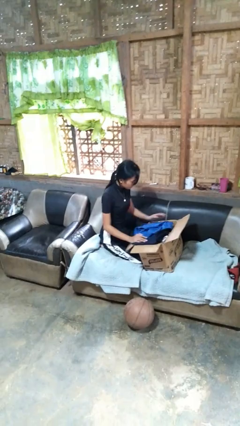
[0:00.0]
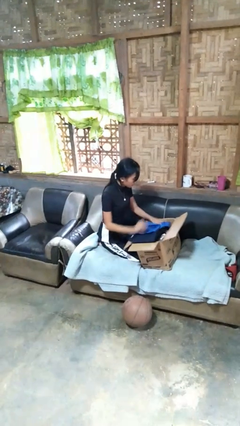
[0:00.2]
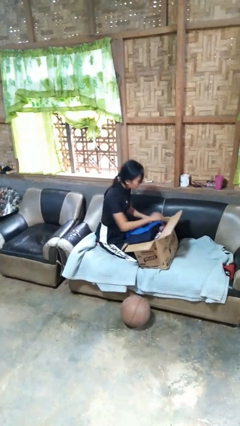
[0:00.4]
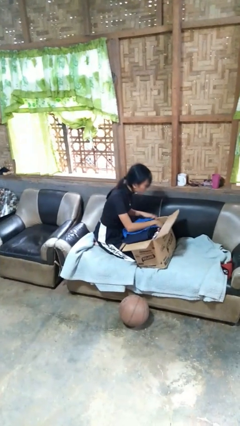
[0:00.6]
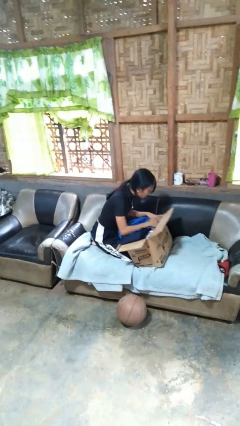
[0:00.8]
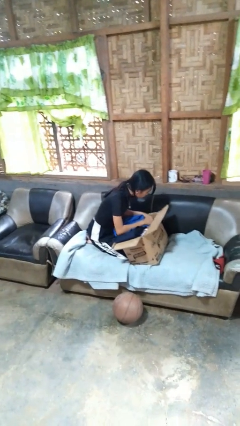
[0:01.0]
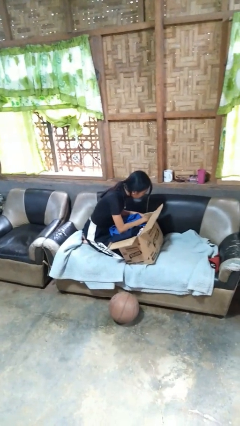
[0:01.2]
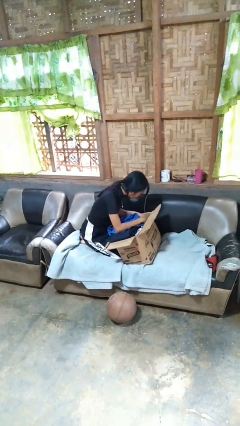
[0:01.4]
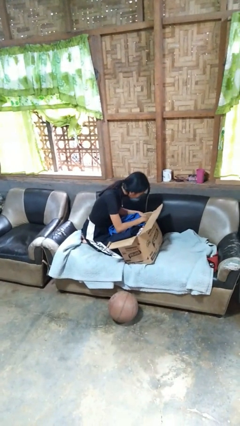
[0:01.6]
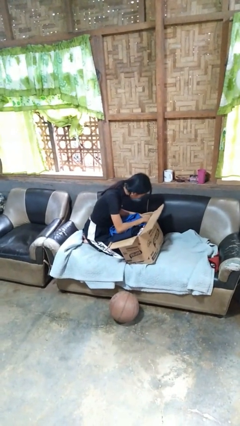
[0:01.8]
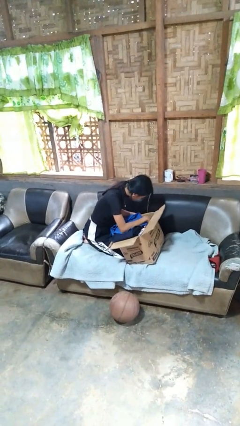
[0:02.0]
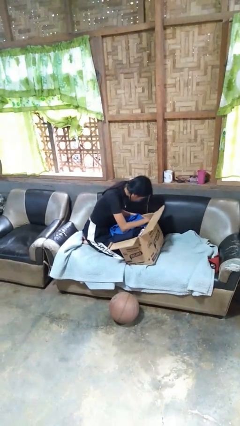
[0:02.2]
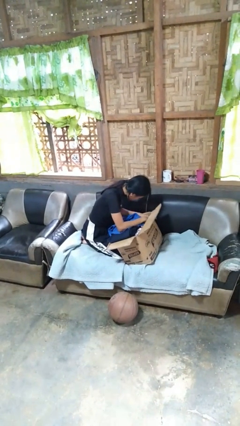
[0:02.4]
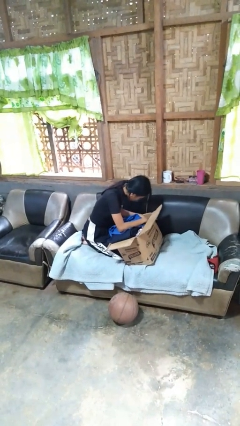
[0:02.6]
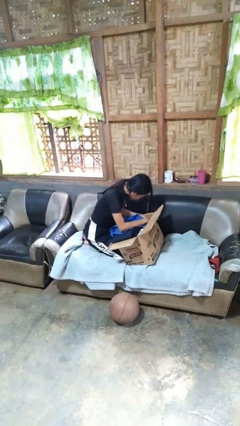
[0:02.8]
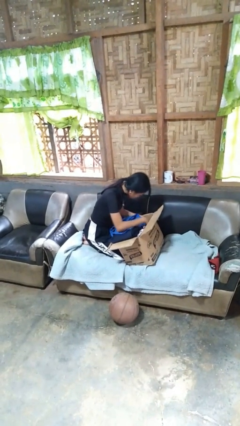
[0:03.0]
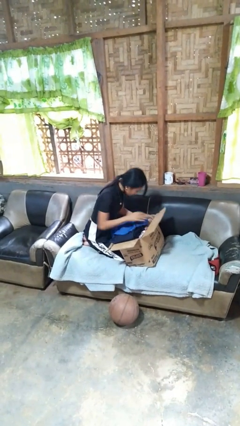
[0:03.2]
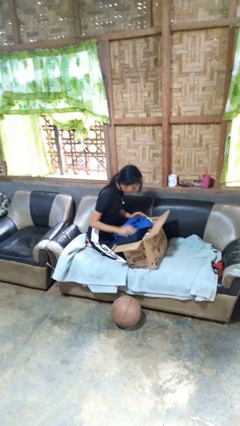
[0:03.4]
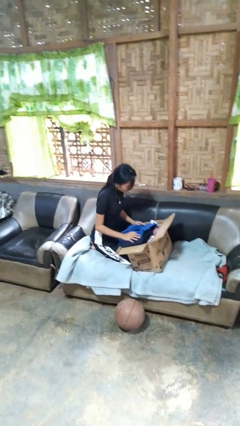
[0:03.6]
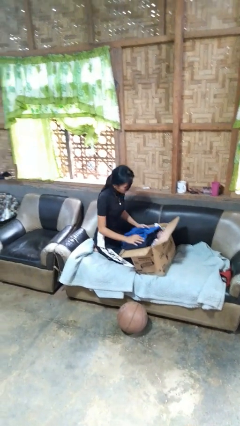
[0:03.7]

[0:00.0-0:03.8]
person searches in box

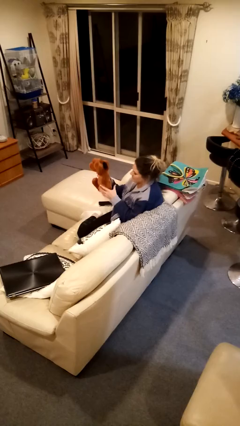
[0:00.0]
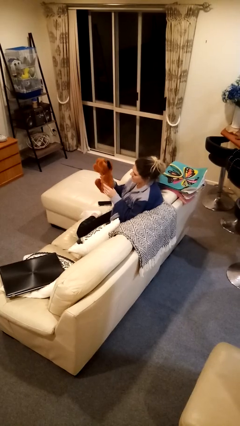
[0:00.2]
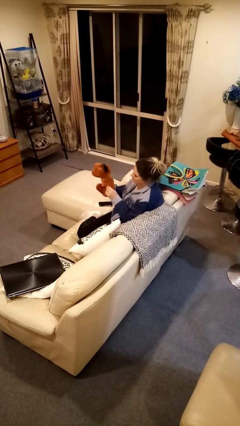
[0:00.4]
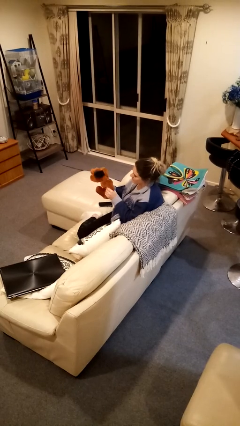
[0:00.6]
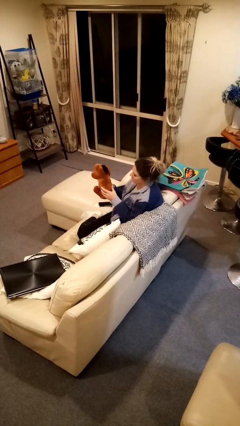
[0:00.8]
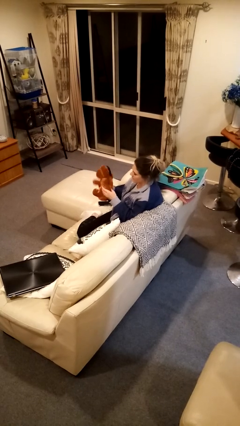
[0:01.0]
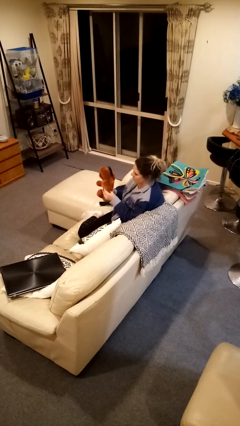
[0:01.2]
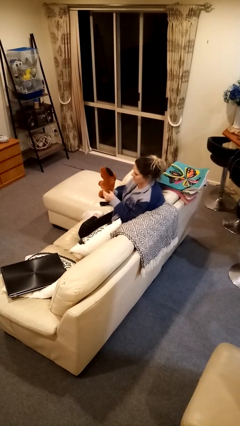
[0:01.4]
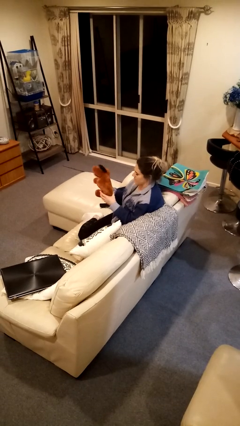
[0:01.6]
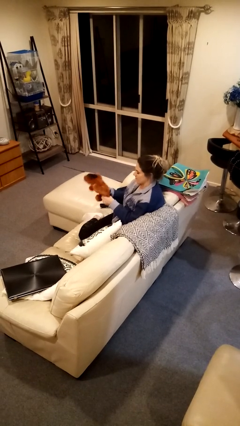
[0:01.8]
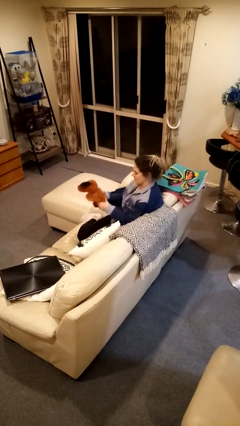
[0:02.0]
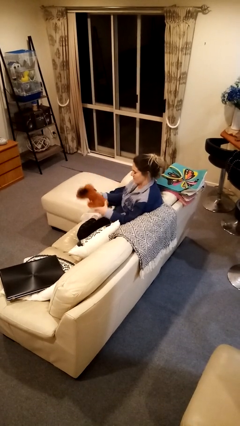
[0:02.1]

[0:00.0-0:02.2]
person squeezes object

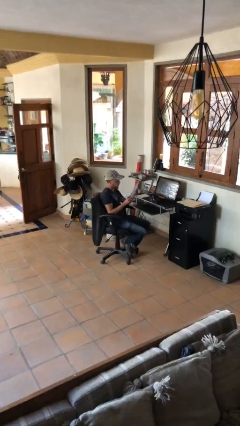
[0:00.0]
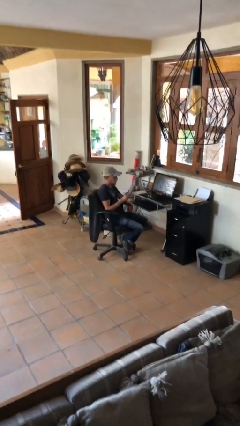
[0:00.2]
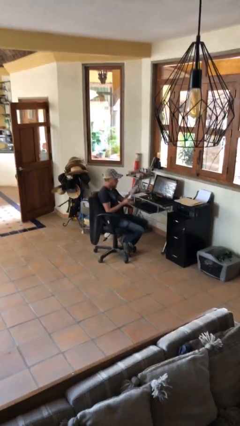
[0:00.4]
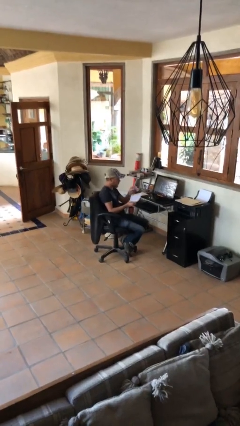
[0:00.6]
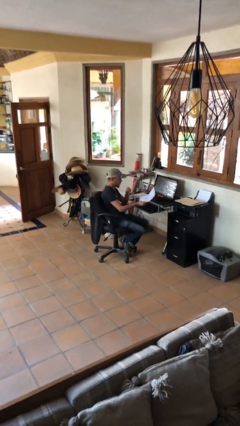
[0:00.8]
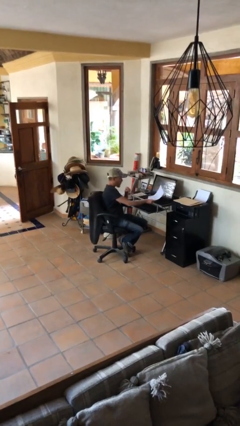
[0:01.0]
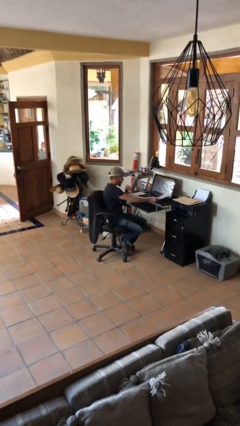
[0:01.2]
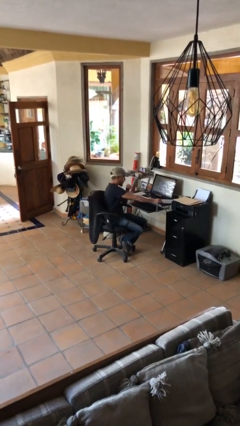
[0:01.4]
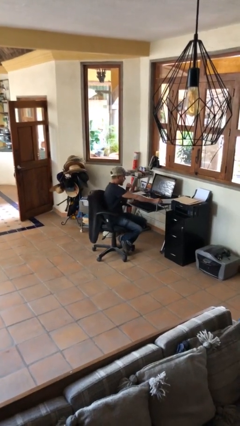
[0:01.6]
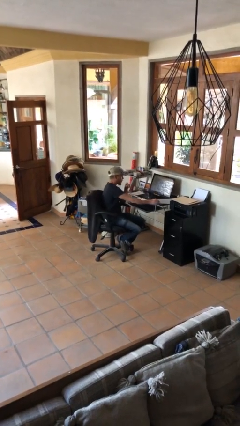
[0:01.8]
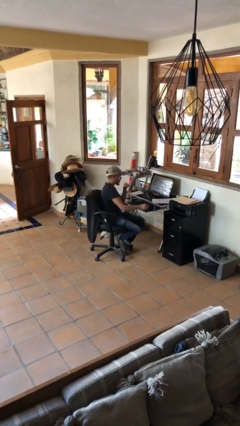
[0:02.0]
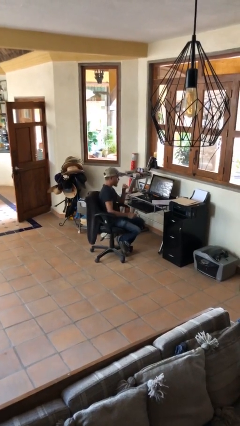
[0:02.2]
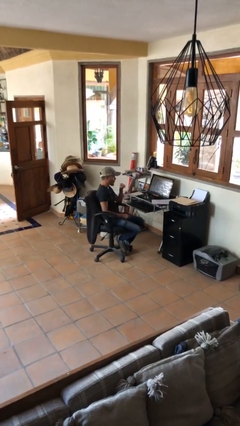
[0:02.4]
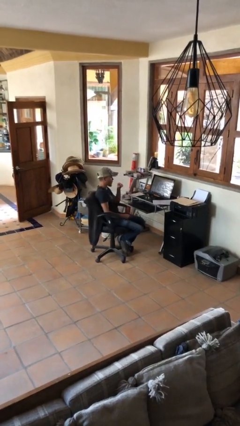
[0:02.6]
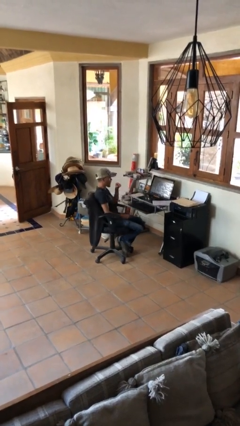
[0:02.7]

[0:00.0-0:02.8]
person puts down object on table

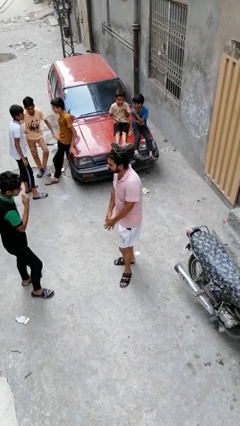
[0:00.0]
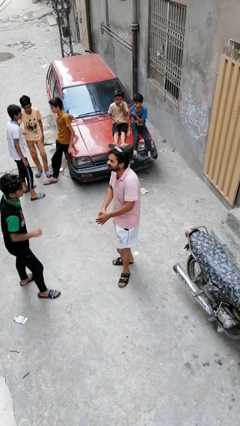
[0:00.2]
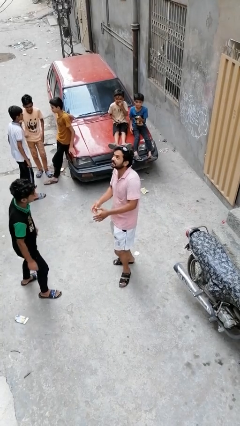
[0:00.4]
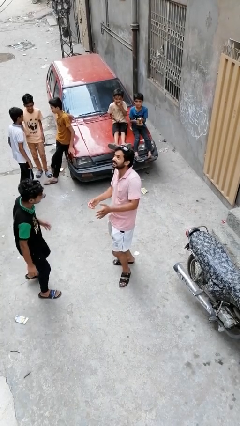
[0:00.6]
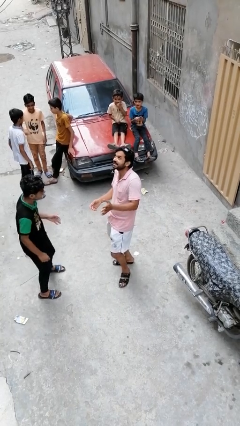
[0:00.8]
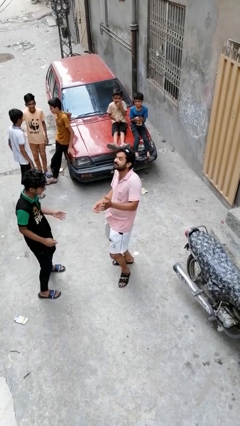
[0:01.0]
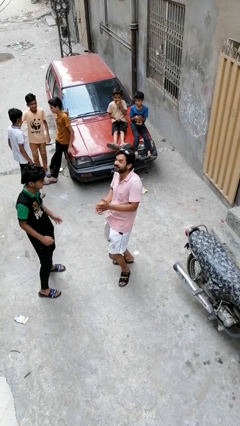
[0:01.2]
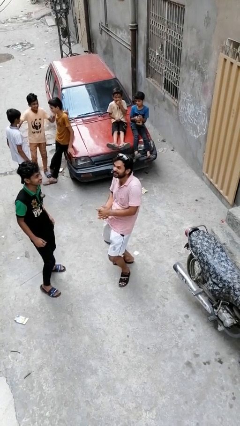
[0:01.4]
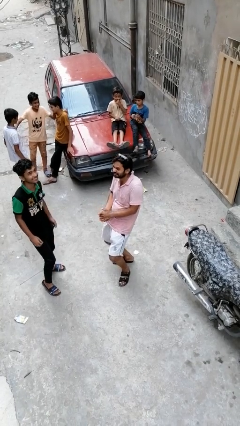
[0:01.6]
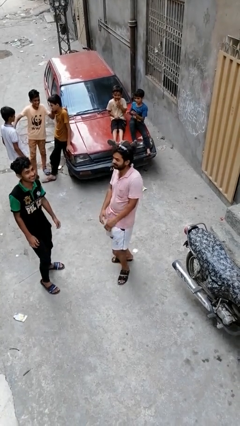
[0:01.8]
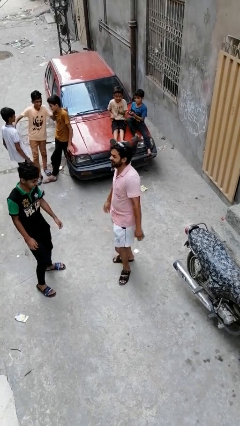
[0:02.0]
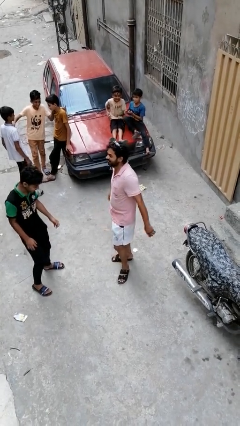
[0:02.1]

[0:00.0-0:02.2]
person laughs with person

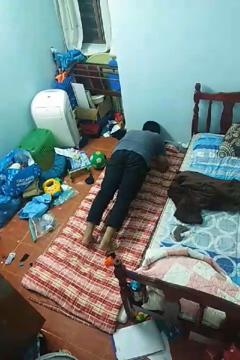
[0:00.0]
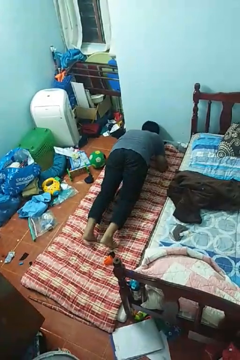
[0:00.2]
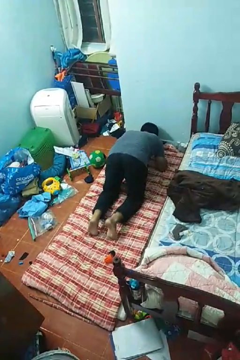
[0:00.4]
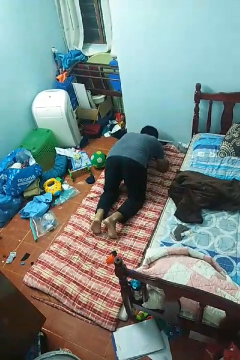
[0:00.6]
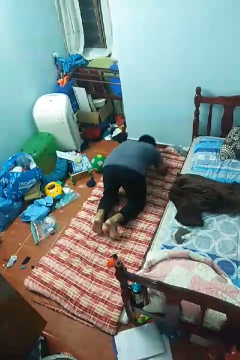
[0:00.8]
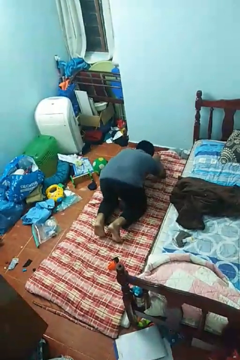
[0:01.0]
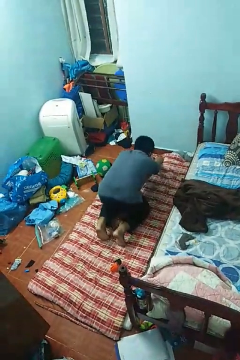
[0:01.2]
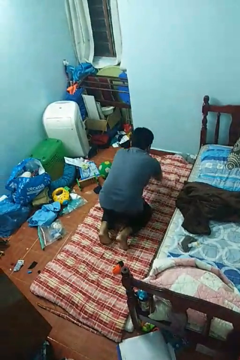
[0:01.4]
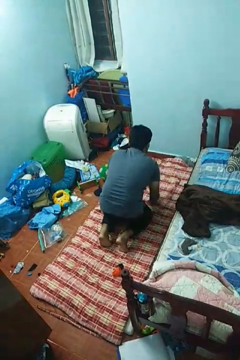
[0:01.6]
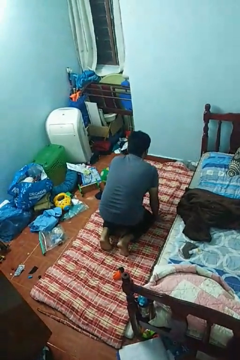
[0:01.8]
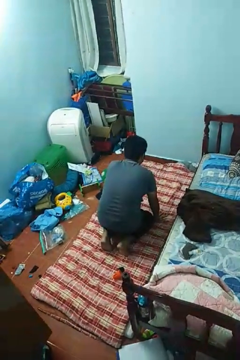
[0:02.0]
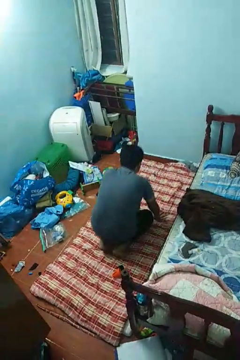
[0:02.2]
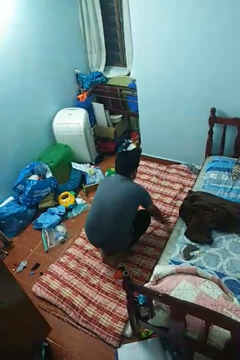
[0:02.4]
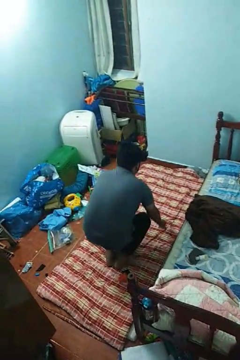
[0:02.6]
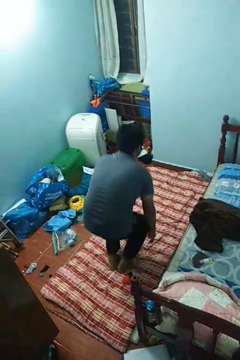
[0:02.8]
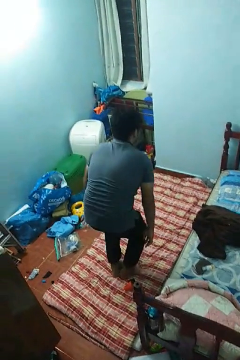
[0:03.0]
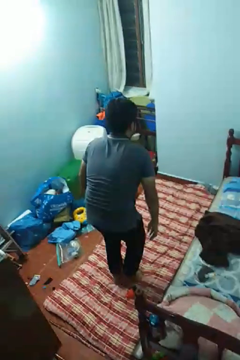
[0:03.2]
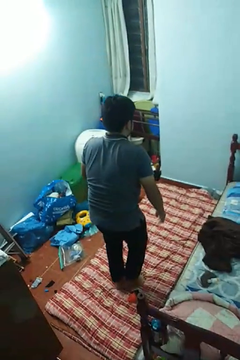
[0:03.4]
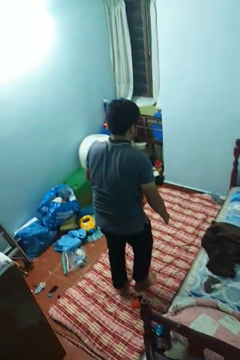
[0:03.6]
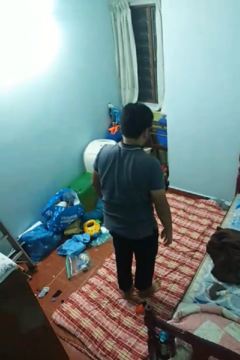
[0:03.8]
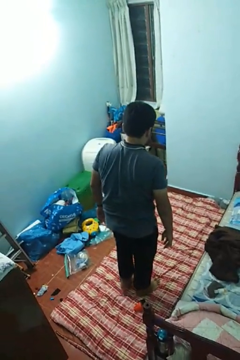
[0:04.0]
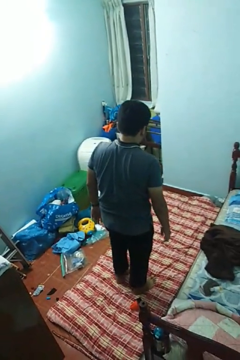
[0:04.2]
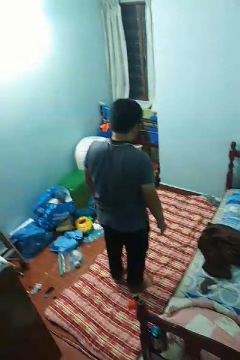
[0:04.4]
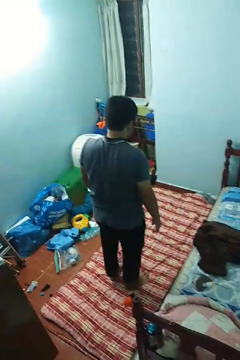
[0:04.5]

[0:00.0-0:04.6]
person stands up from floor

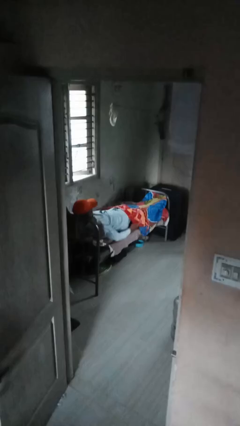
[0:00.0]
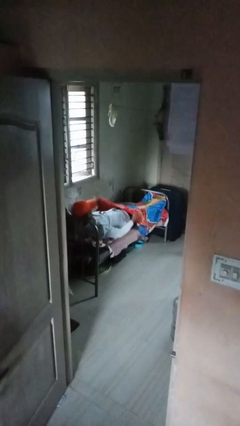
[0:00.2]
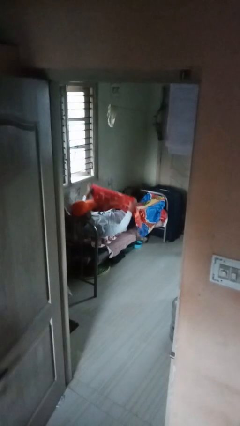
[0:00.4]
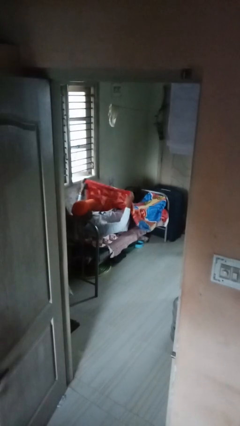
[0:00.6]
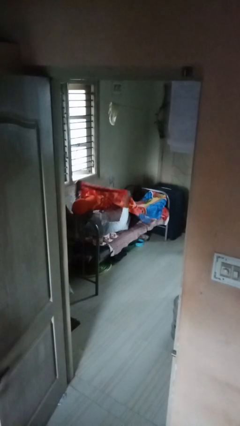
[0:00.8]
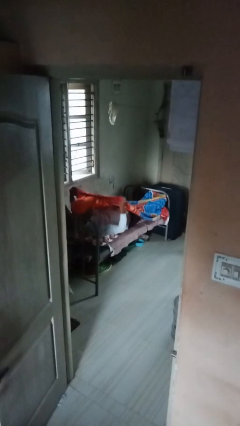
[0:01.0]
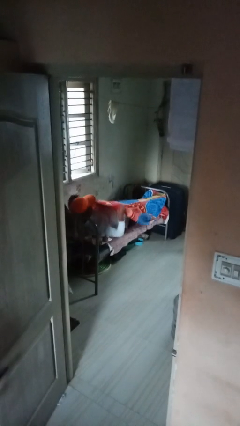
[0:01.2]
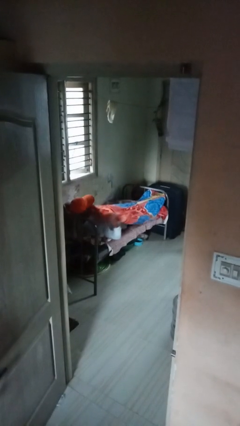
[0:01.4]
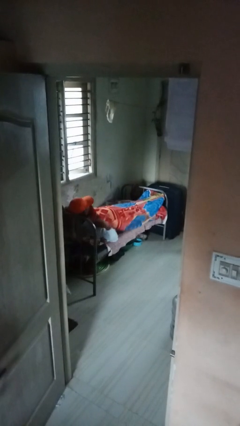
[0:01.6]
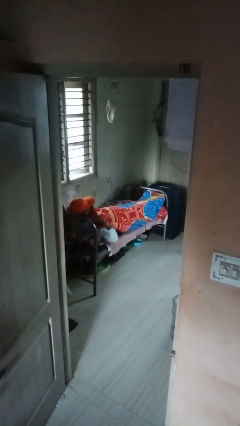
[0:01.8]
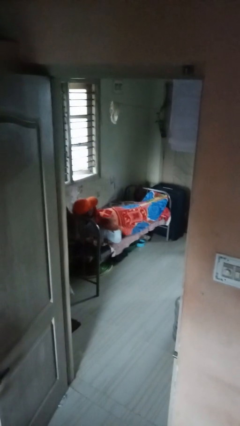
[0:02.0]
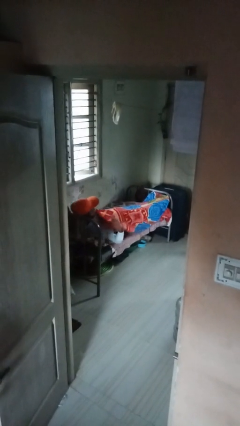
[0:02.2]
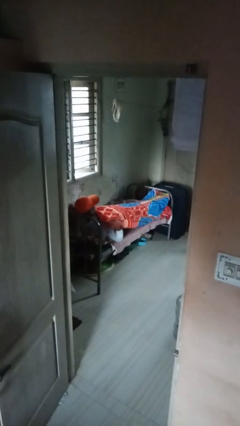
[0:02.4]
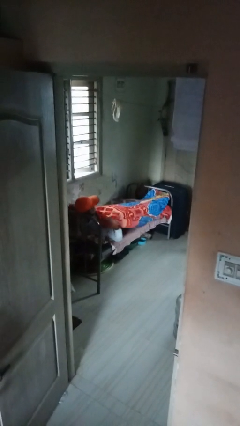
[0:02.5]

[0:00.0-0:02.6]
person covers with bedsheets
